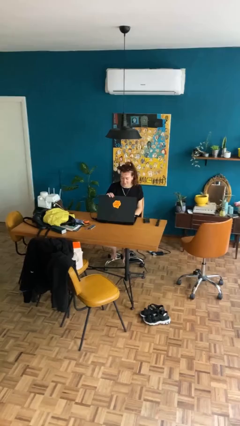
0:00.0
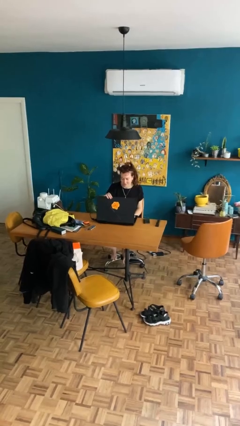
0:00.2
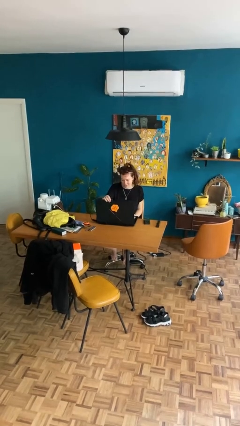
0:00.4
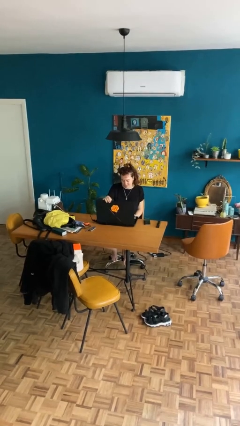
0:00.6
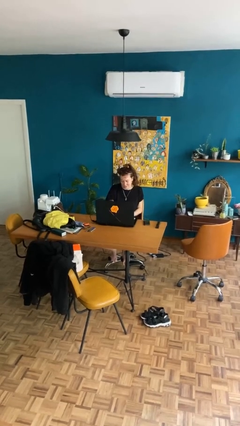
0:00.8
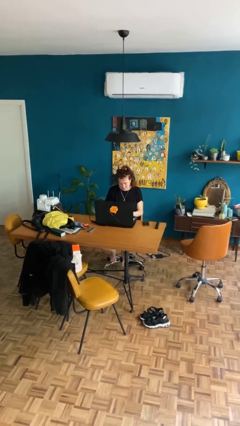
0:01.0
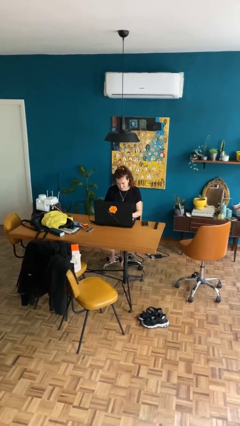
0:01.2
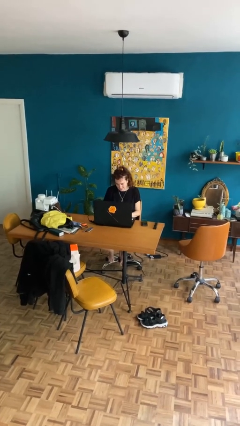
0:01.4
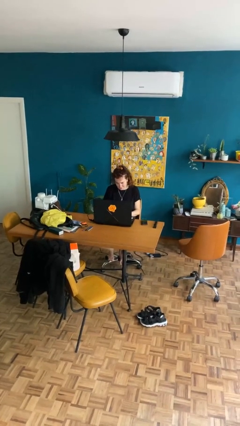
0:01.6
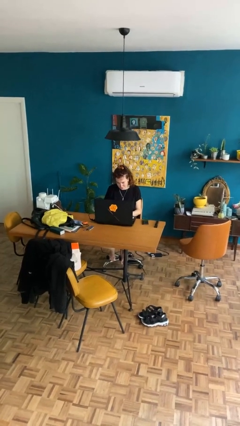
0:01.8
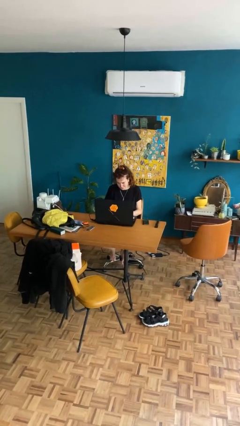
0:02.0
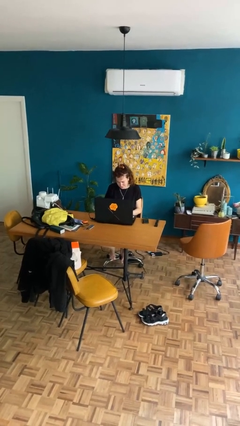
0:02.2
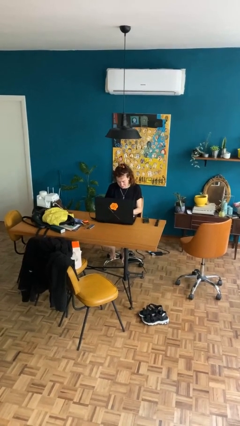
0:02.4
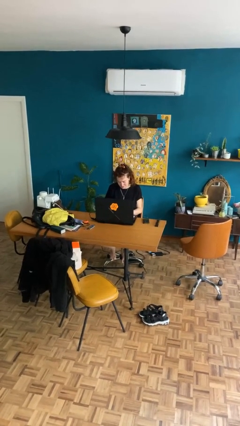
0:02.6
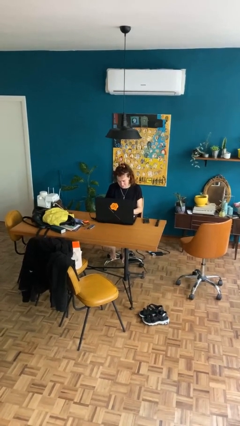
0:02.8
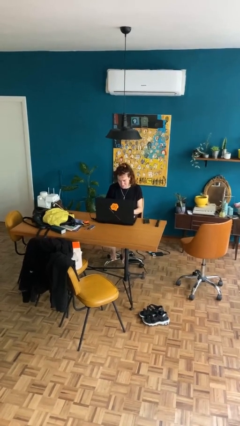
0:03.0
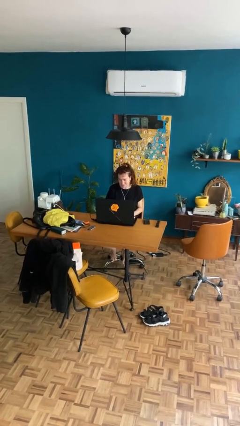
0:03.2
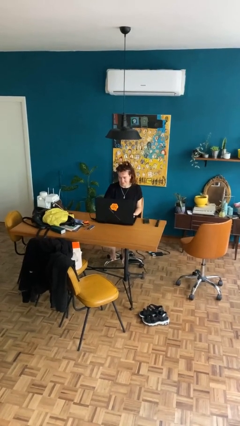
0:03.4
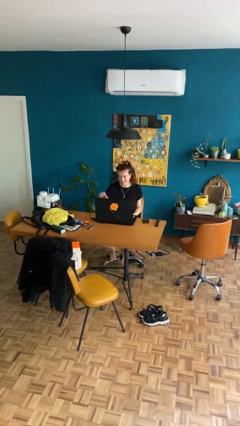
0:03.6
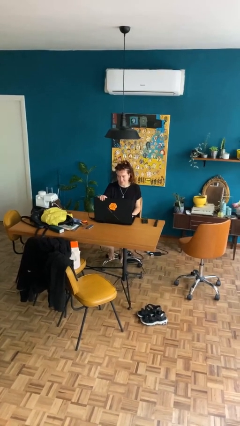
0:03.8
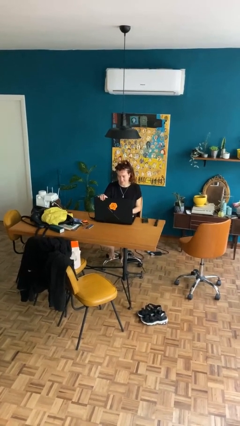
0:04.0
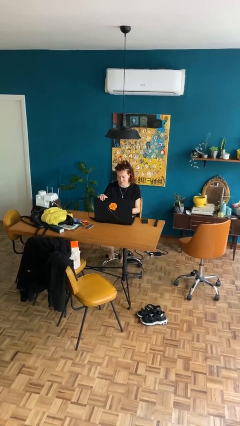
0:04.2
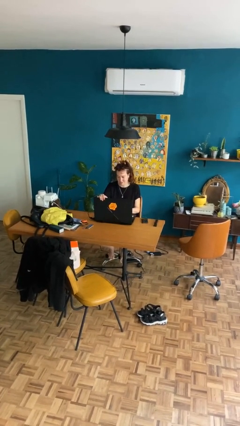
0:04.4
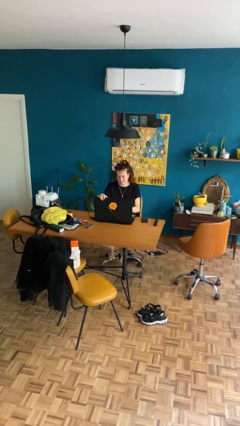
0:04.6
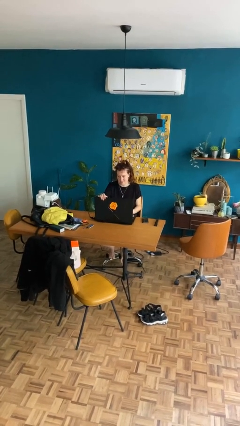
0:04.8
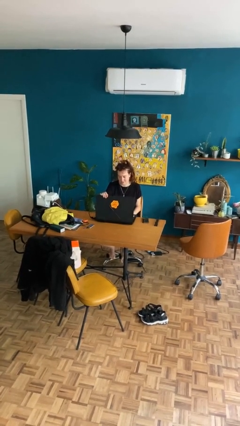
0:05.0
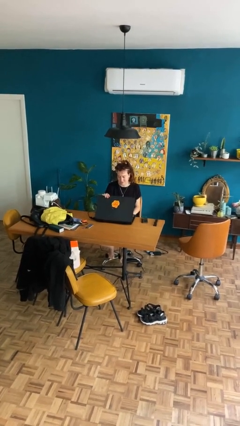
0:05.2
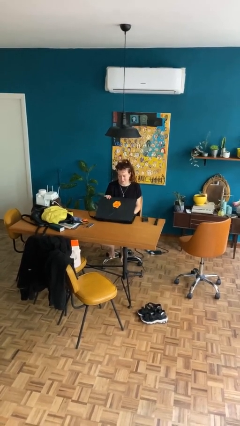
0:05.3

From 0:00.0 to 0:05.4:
person interacts with laptop

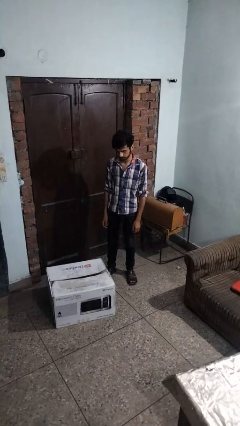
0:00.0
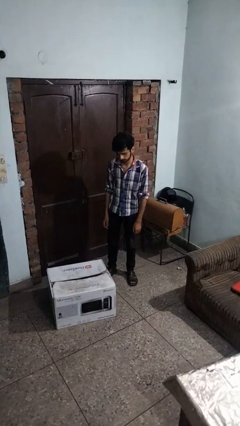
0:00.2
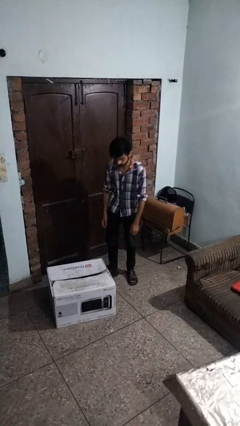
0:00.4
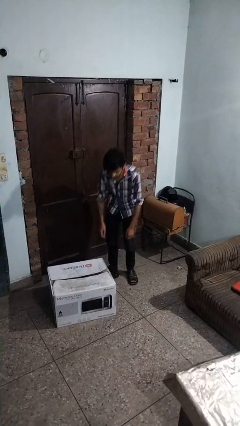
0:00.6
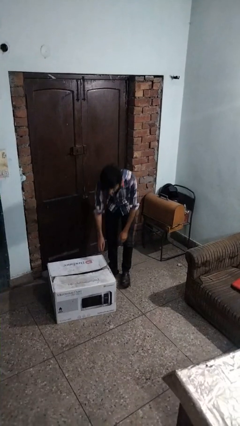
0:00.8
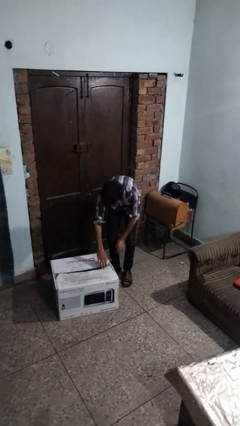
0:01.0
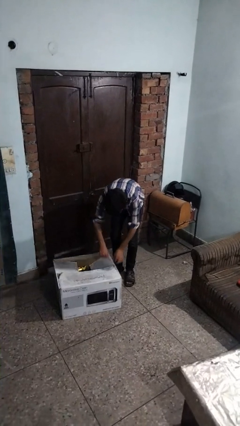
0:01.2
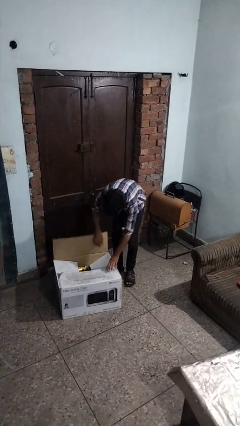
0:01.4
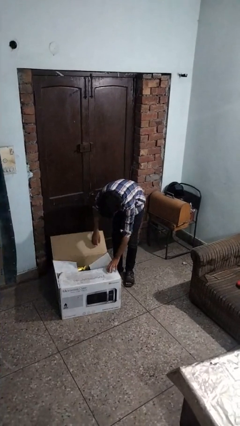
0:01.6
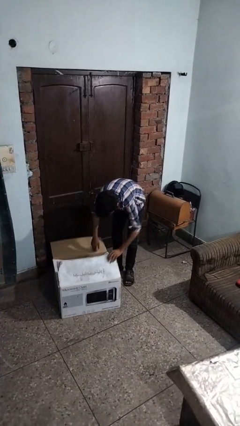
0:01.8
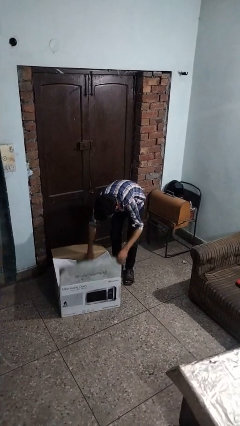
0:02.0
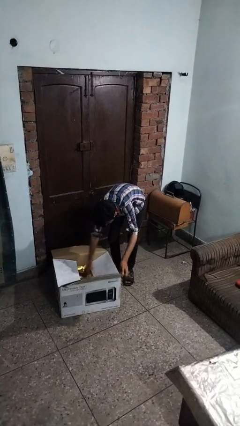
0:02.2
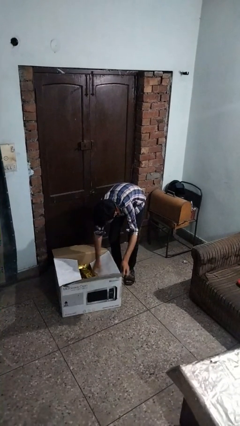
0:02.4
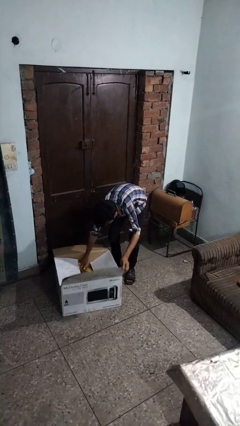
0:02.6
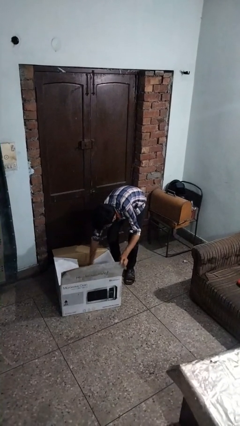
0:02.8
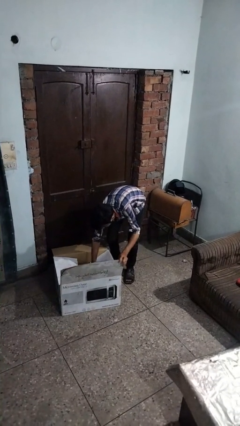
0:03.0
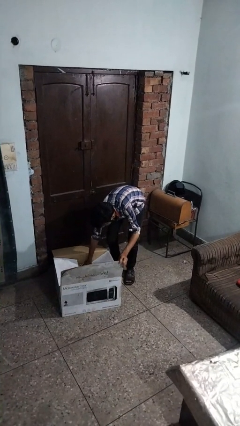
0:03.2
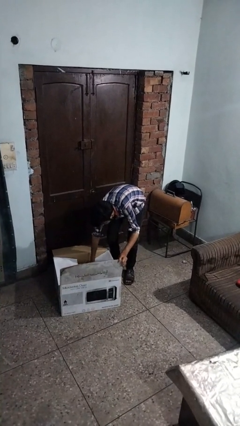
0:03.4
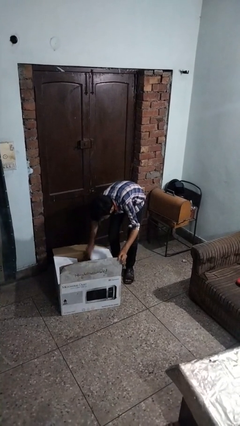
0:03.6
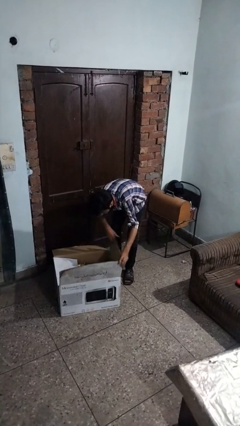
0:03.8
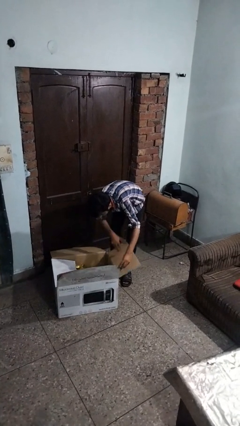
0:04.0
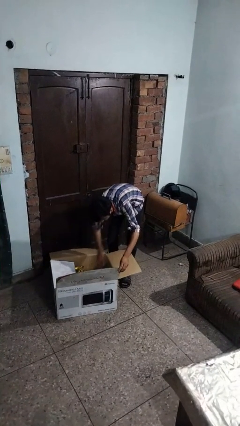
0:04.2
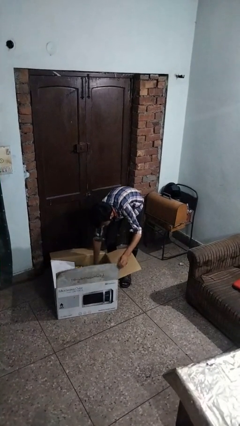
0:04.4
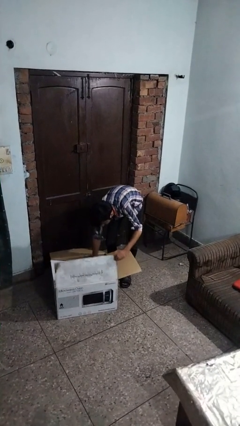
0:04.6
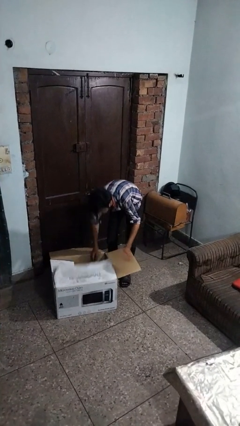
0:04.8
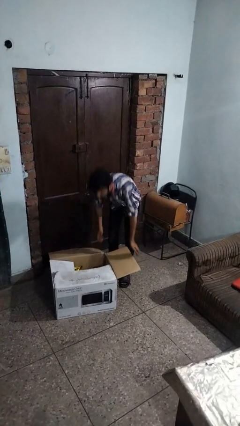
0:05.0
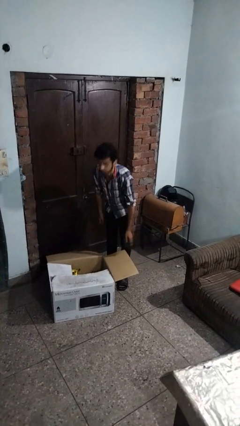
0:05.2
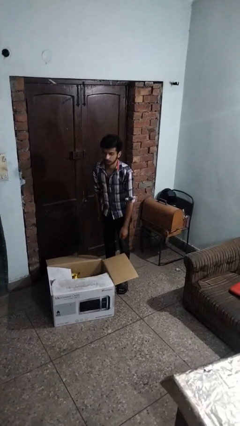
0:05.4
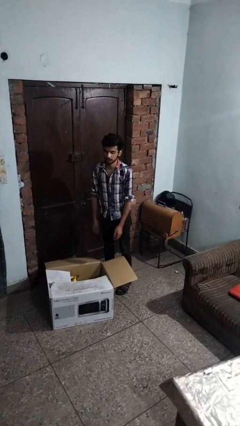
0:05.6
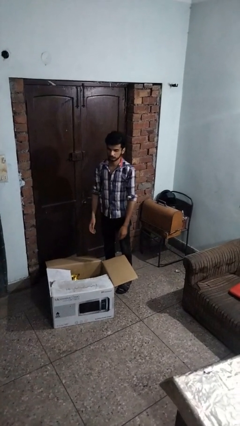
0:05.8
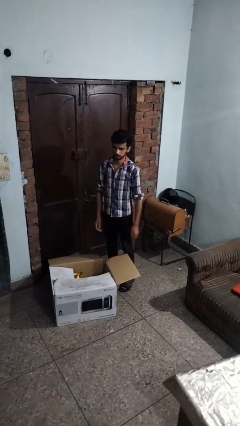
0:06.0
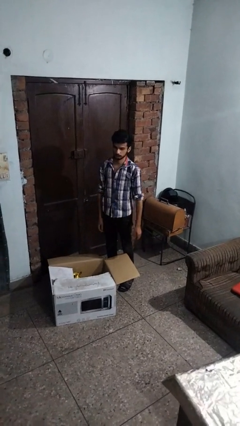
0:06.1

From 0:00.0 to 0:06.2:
person searches in box

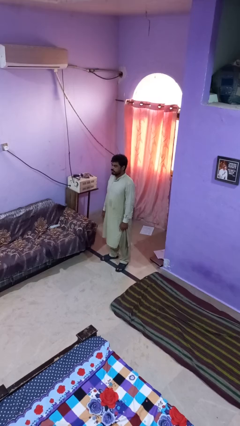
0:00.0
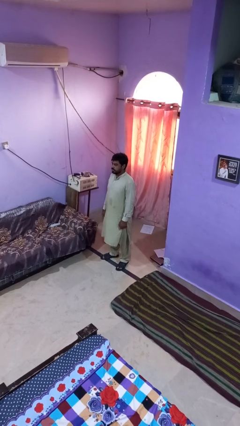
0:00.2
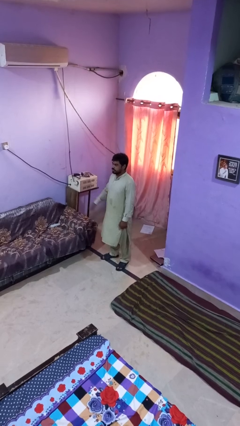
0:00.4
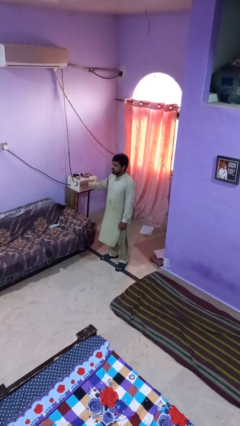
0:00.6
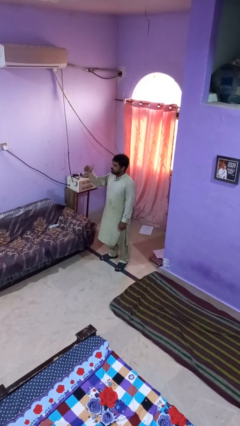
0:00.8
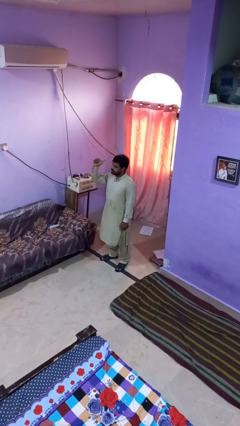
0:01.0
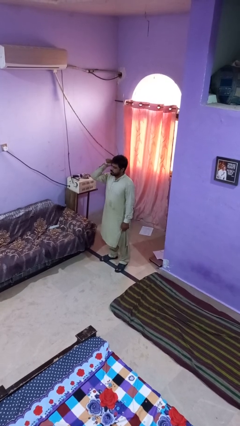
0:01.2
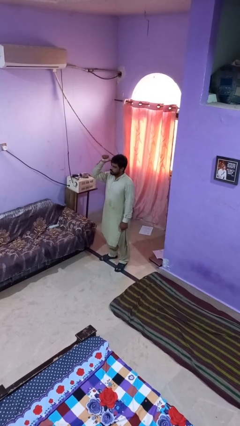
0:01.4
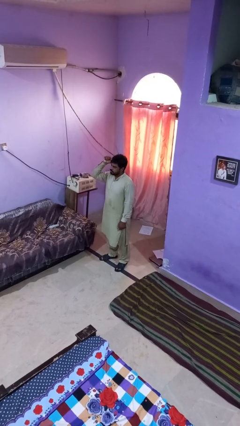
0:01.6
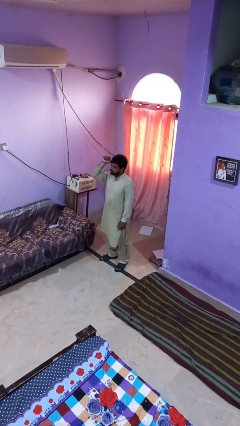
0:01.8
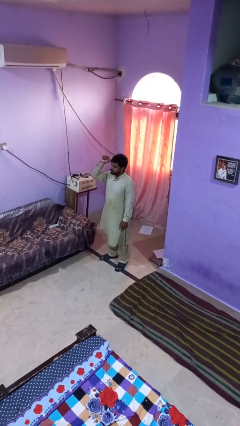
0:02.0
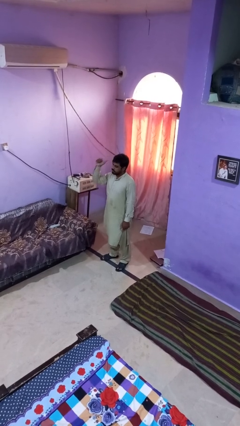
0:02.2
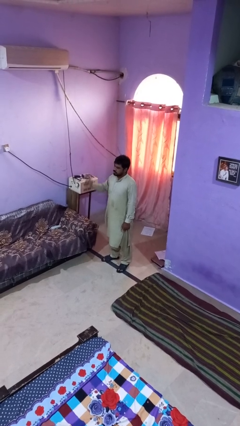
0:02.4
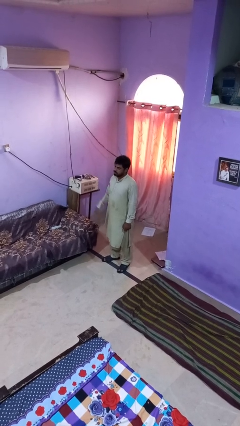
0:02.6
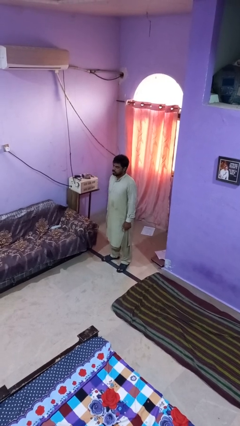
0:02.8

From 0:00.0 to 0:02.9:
person gestures behind me

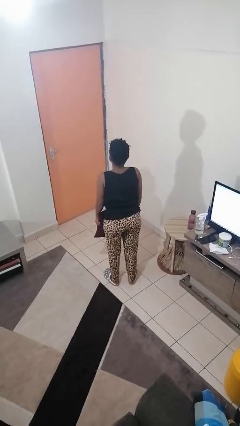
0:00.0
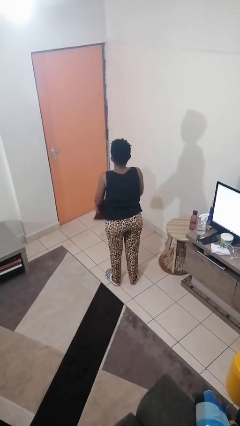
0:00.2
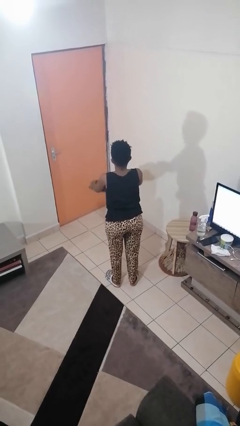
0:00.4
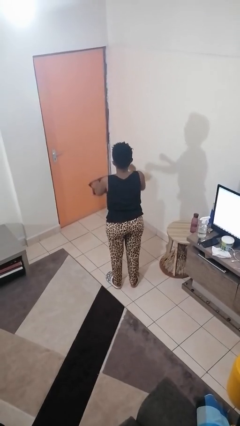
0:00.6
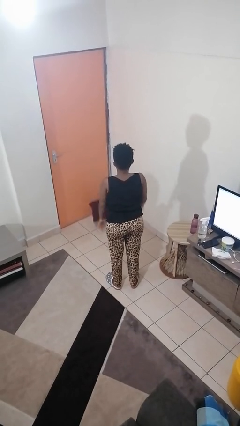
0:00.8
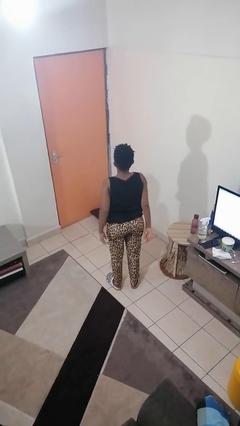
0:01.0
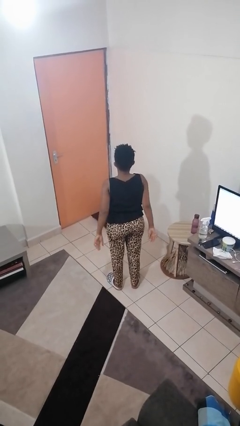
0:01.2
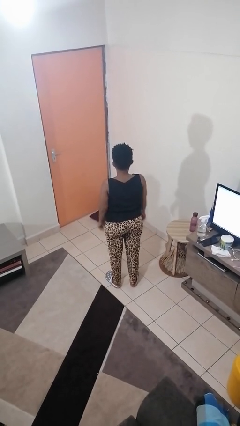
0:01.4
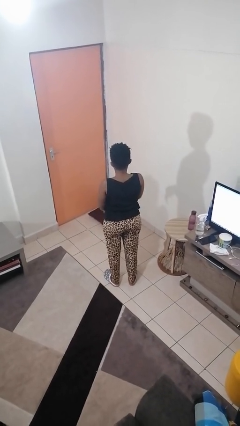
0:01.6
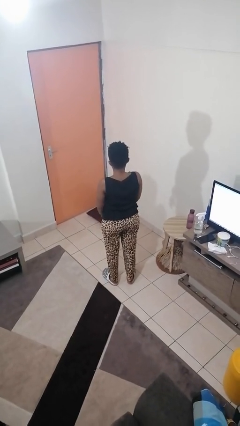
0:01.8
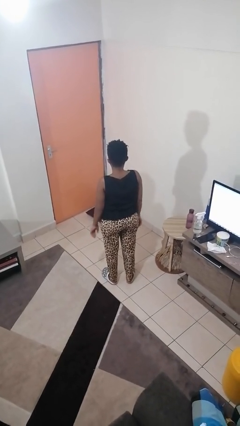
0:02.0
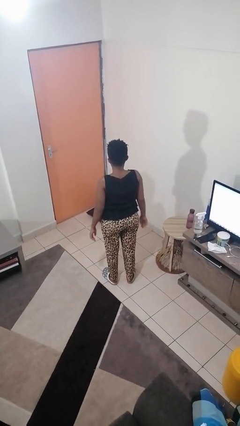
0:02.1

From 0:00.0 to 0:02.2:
person throws object to ground

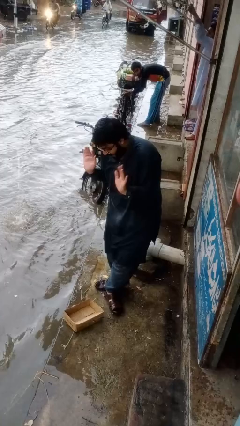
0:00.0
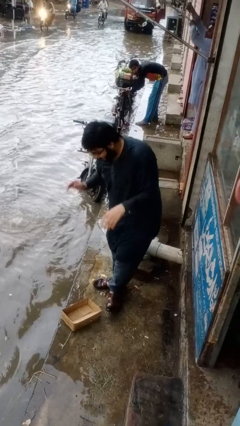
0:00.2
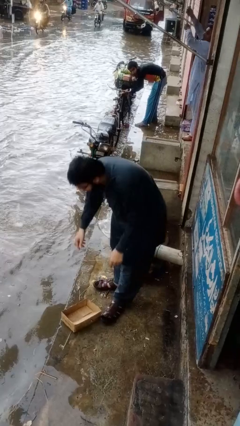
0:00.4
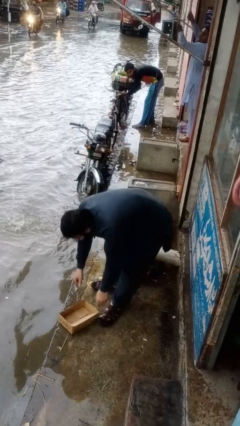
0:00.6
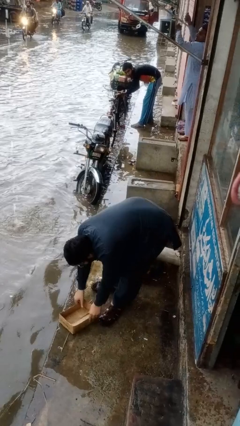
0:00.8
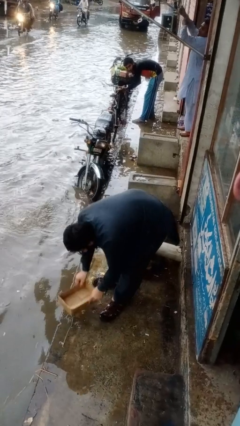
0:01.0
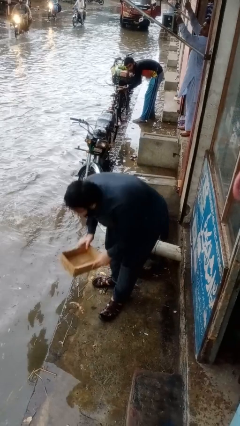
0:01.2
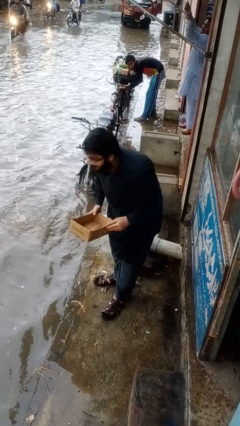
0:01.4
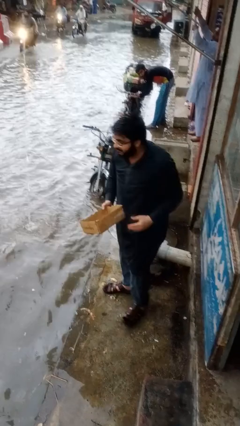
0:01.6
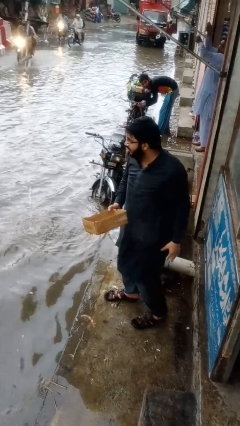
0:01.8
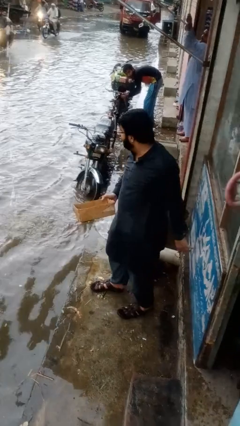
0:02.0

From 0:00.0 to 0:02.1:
person picks up object from floor
